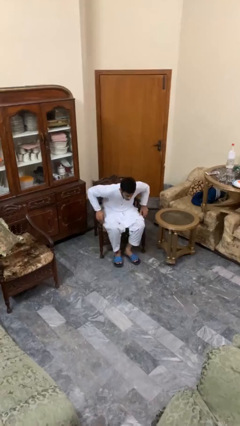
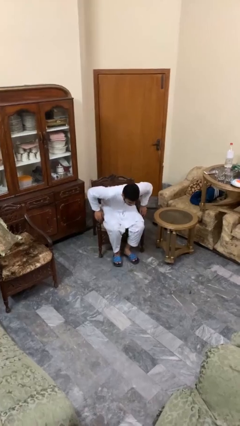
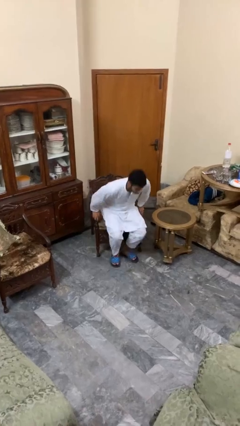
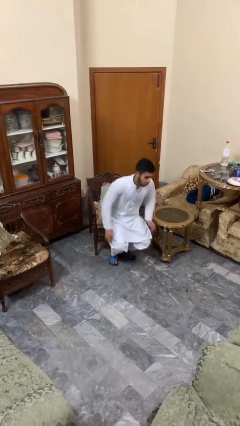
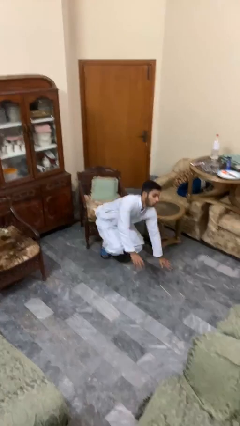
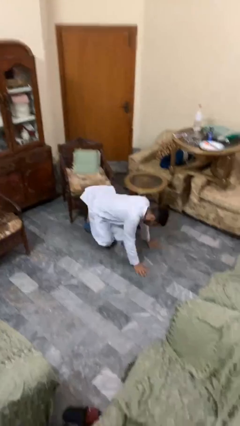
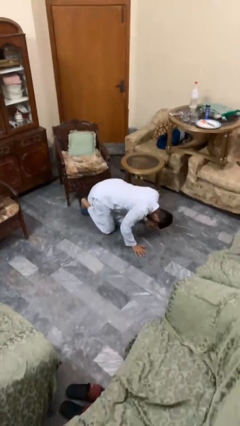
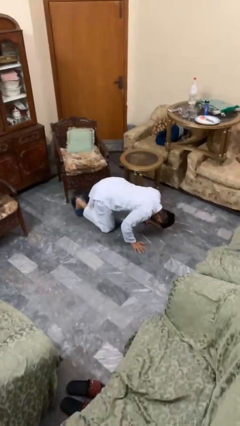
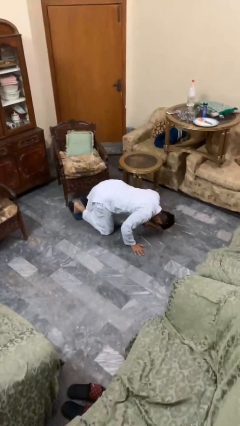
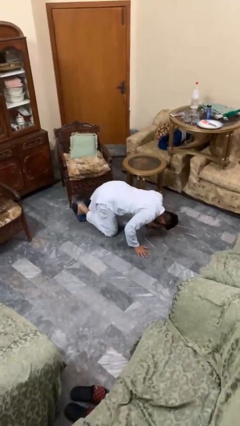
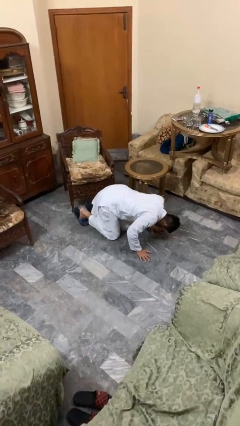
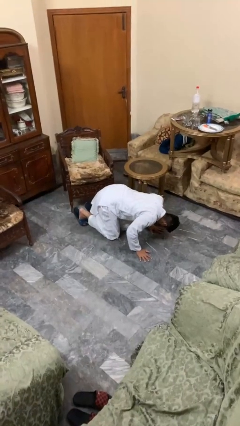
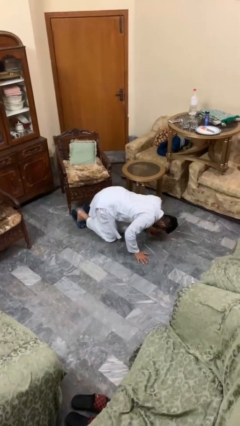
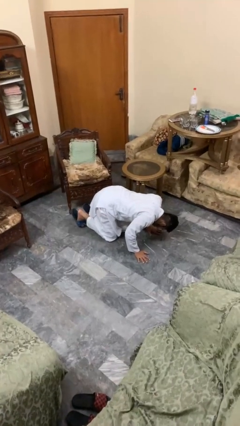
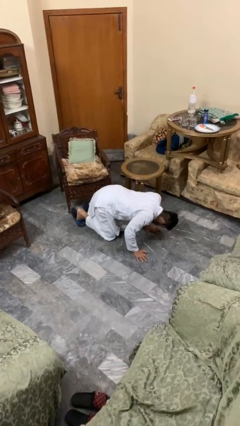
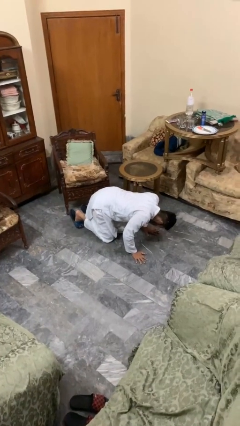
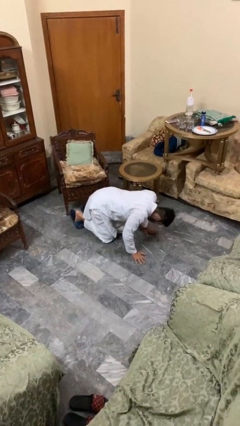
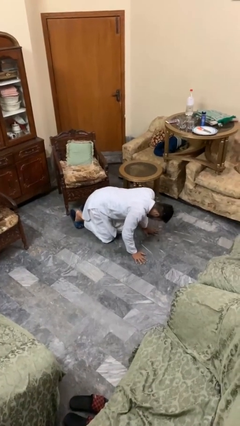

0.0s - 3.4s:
person falls from chair

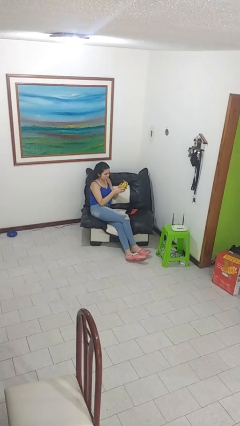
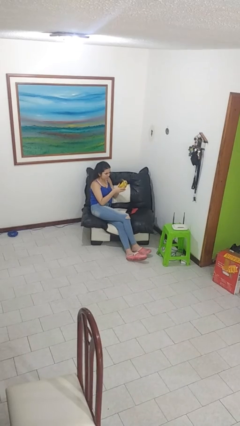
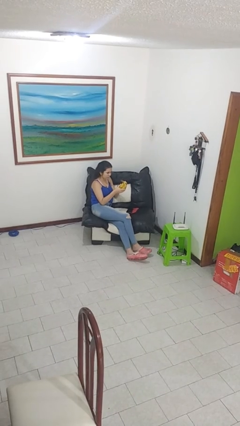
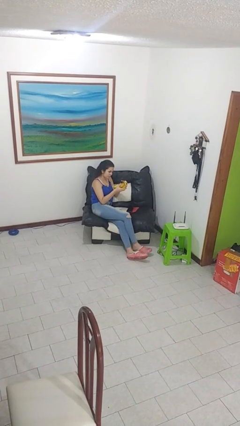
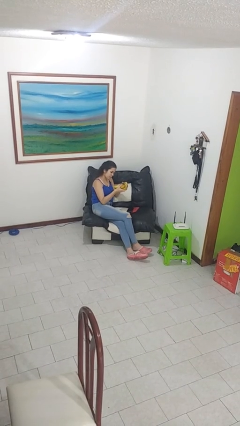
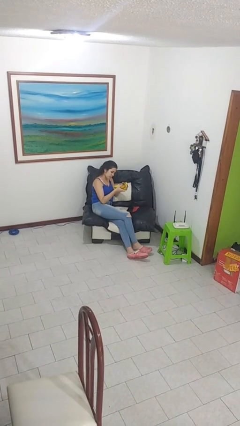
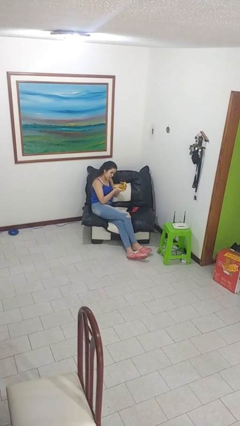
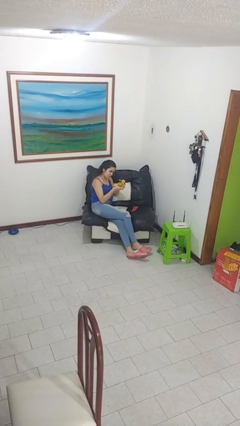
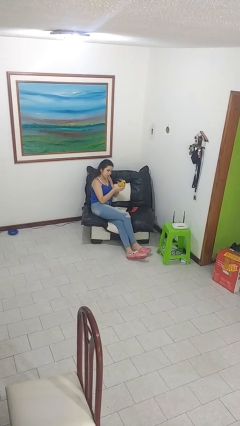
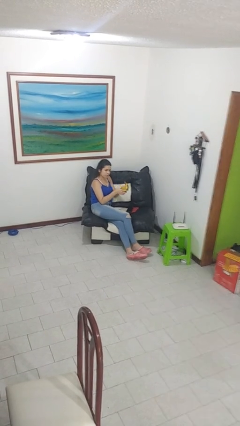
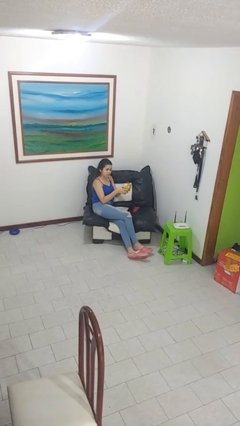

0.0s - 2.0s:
person taps object with finger

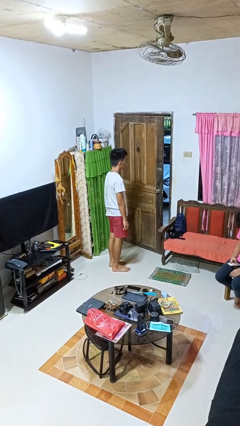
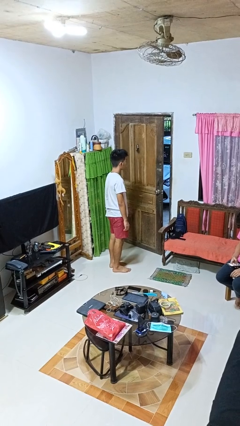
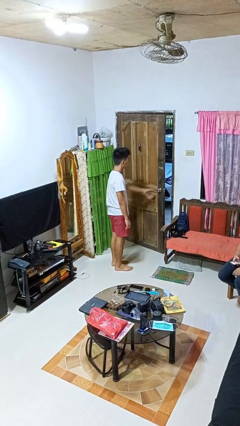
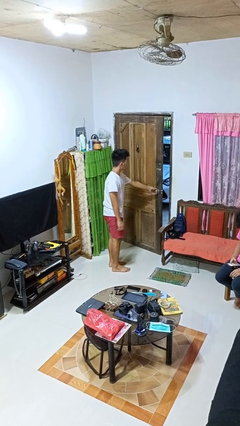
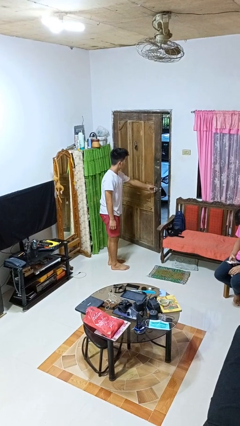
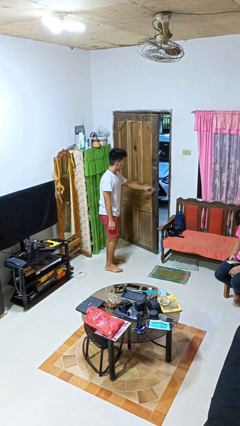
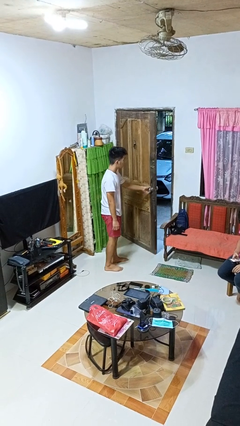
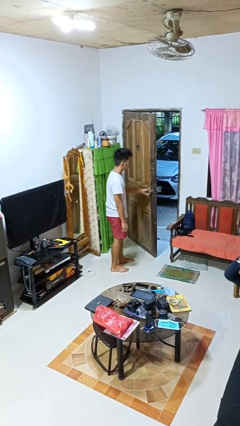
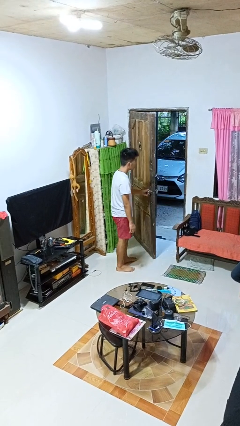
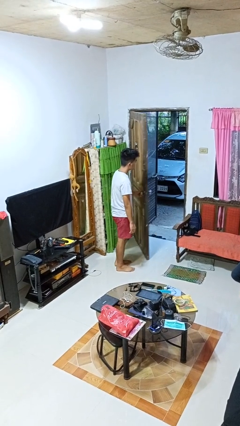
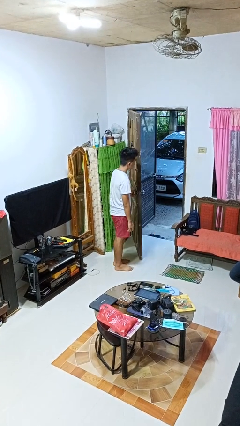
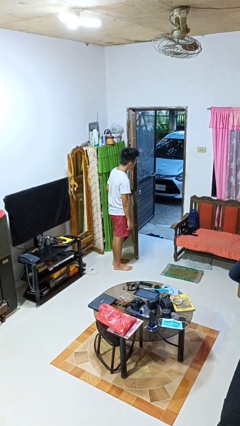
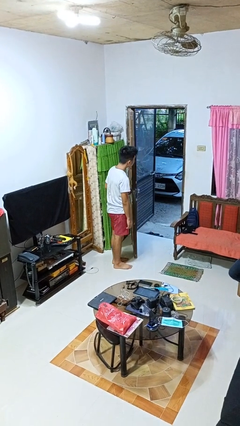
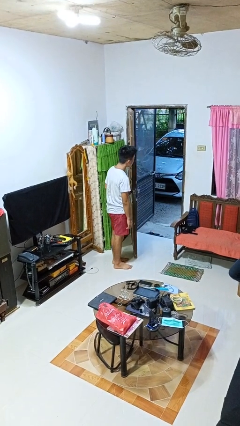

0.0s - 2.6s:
person opens facility door

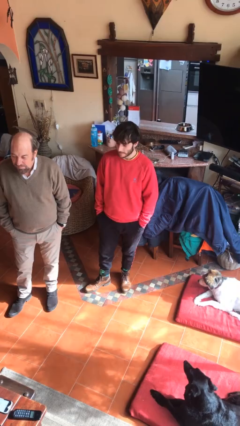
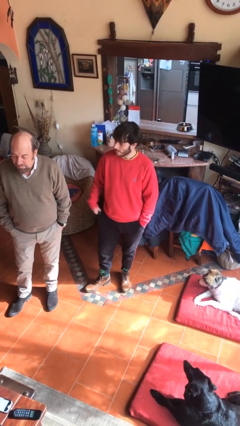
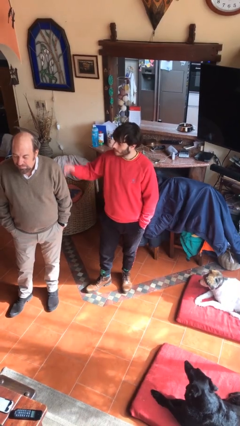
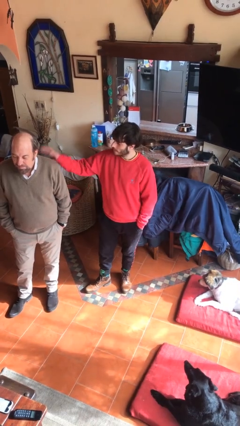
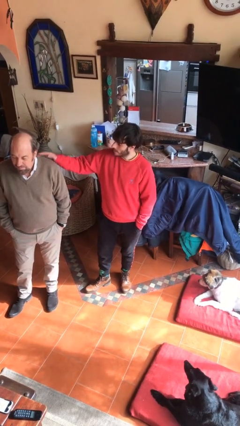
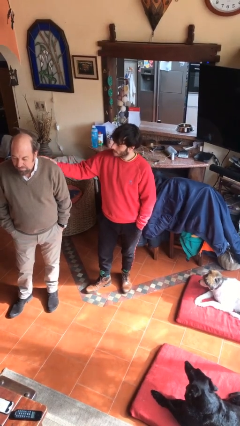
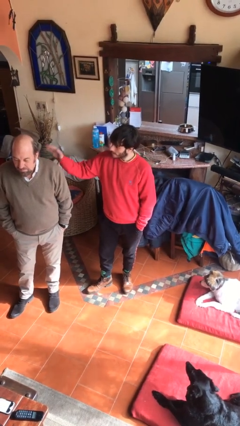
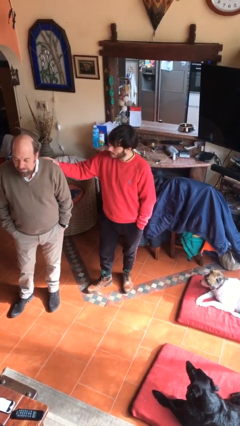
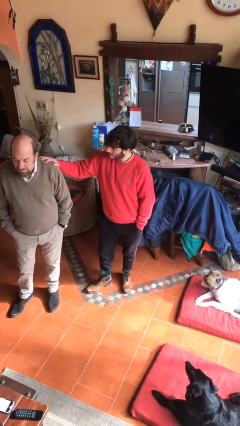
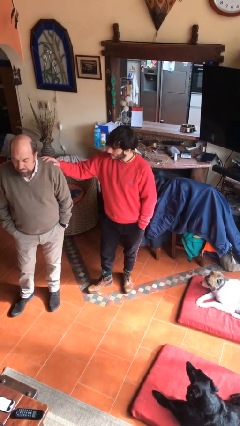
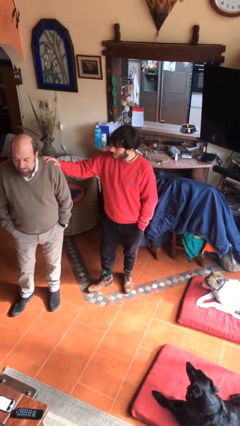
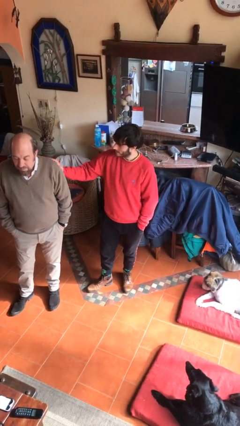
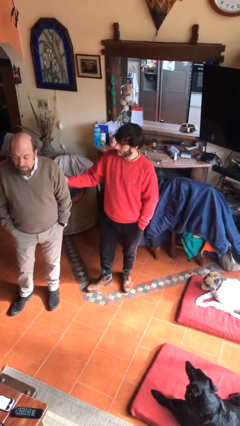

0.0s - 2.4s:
person pounds shoulders of person

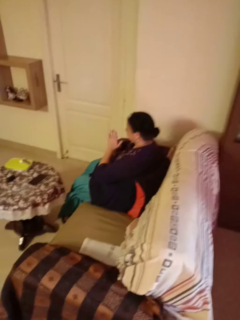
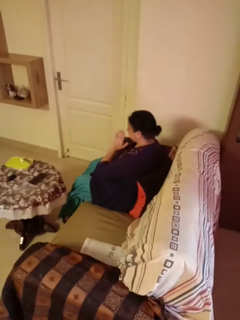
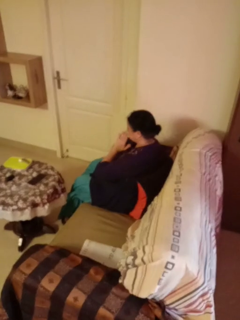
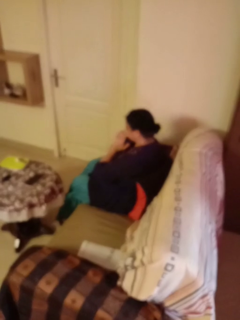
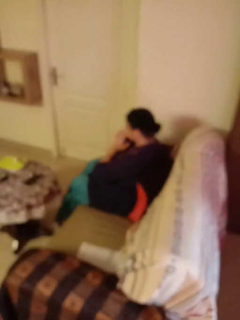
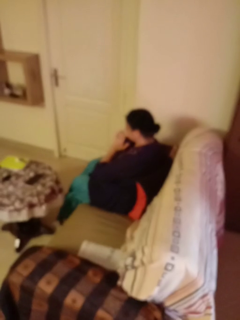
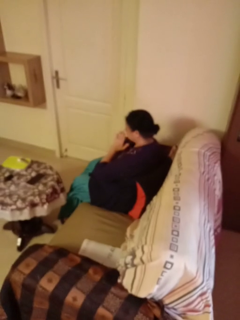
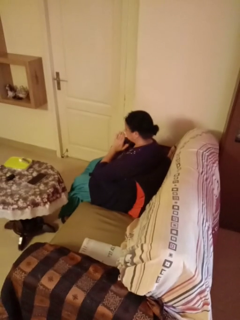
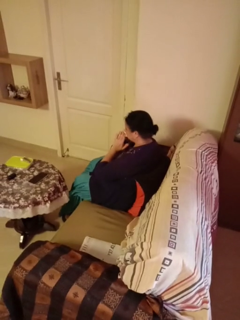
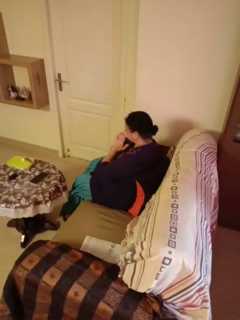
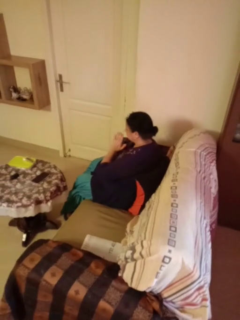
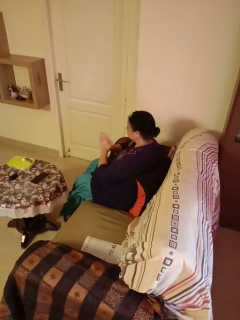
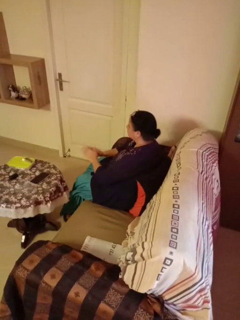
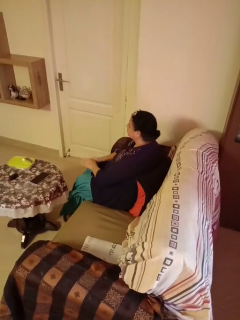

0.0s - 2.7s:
person prays

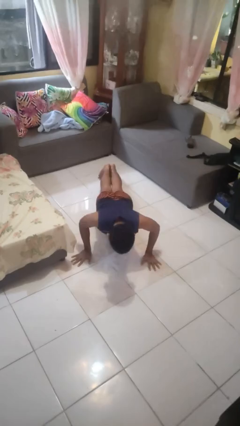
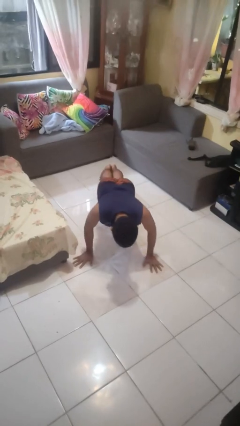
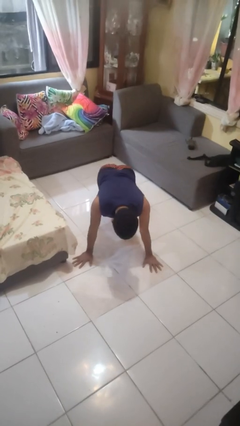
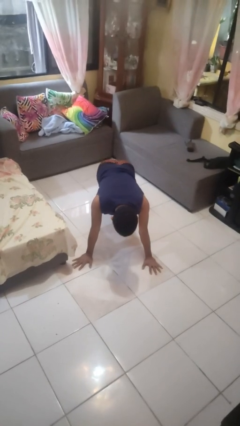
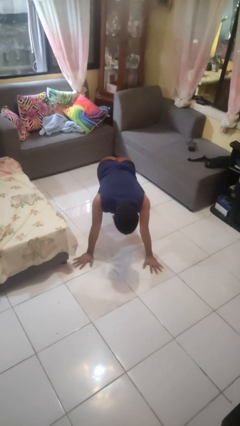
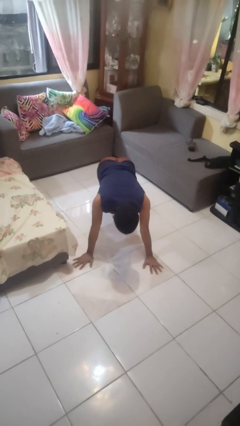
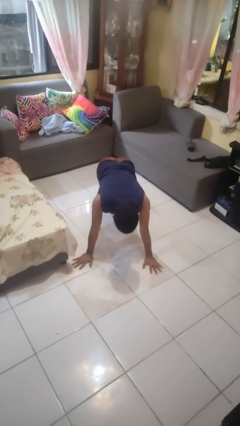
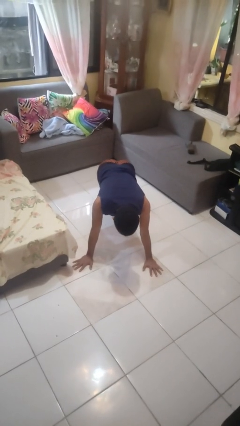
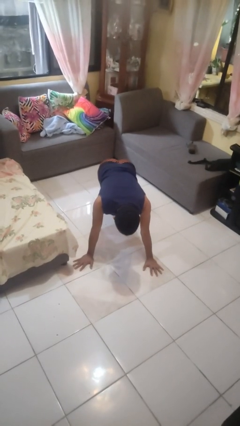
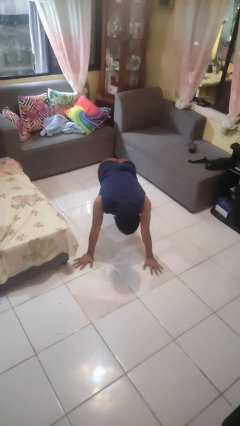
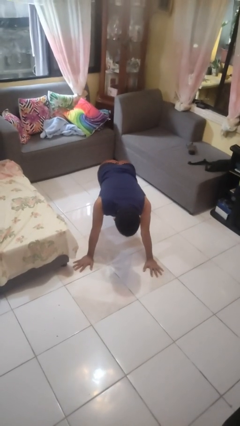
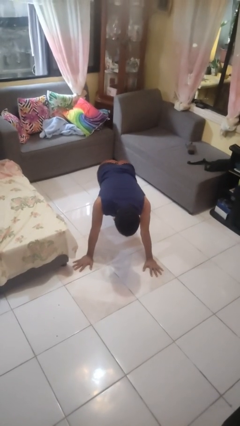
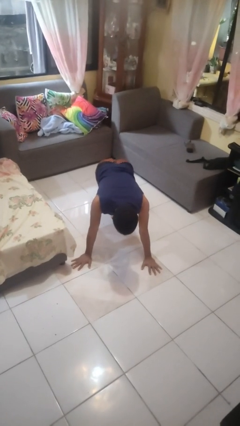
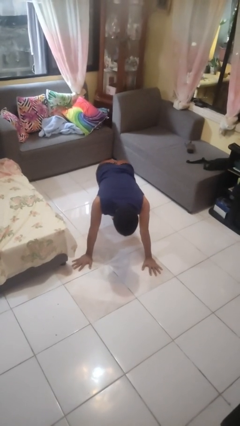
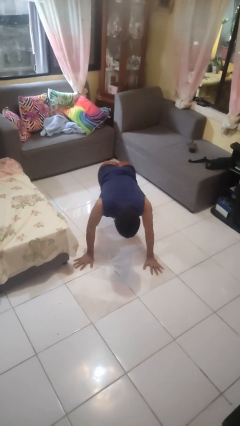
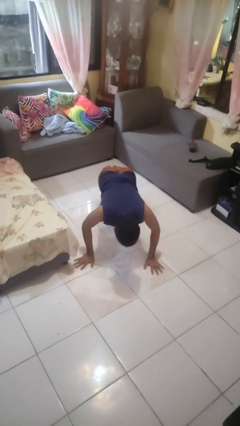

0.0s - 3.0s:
person exercises with pushup

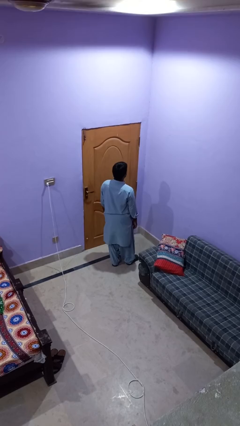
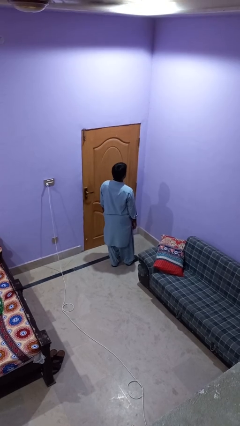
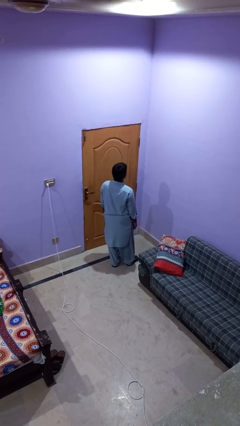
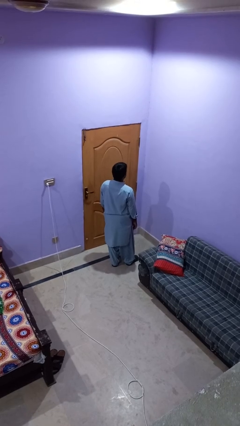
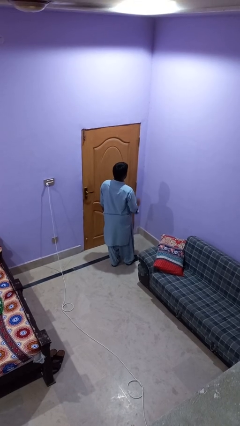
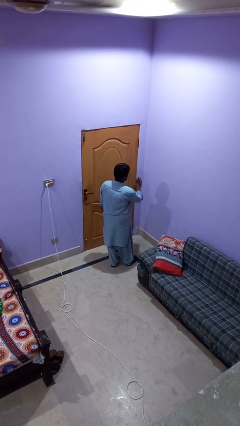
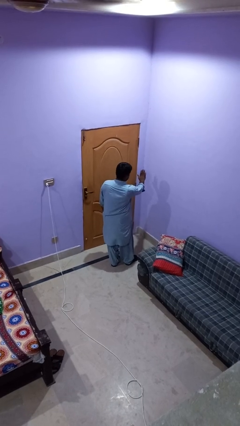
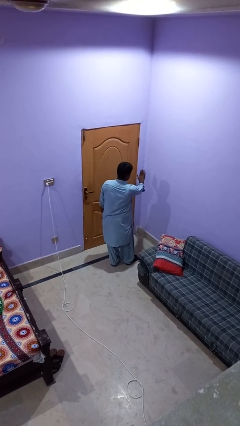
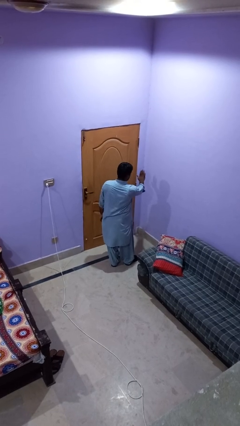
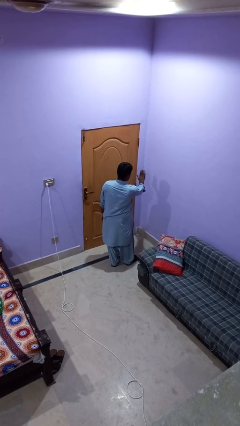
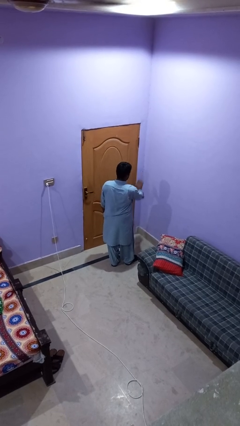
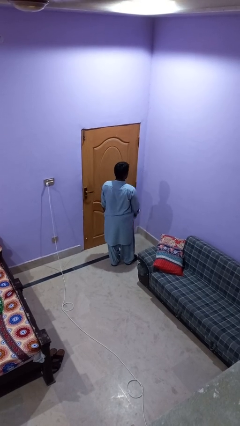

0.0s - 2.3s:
person gestures stop
